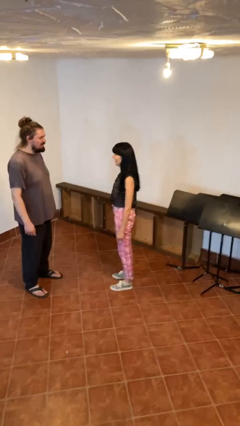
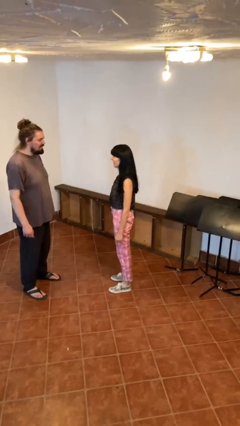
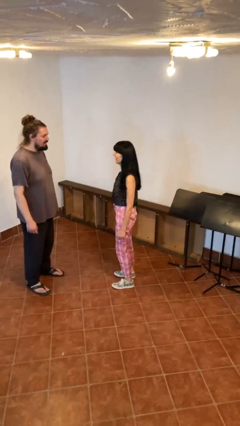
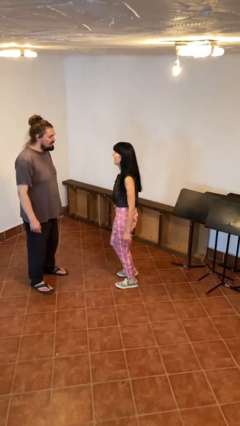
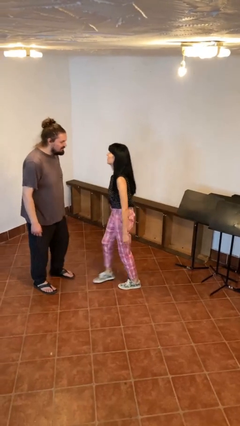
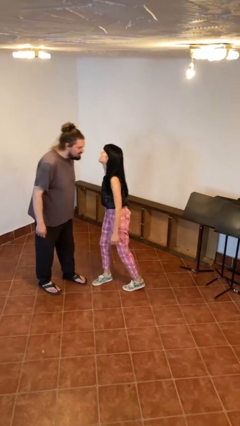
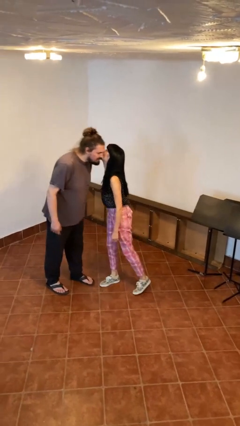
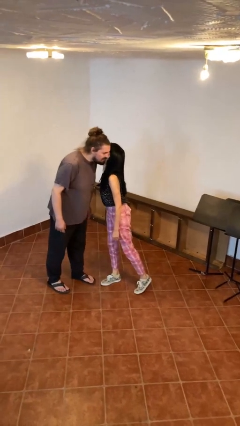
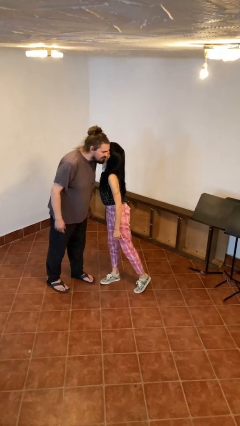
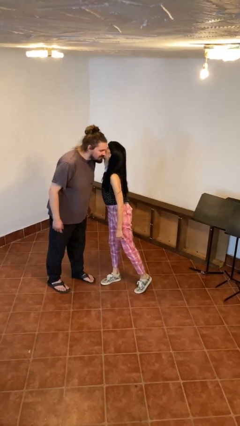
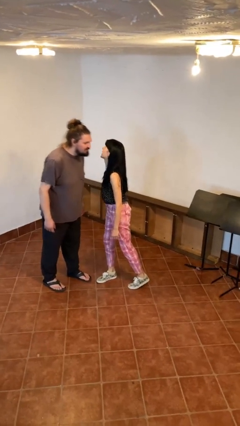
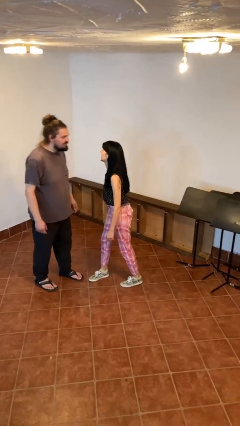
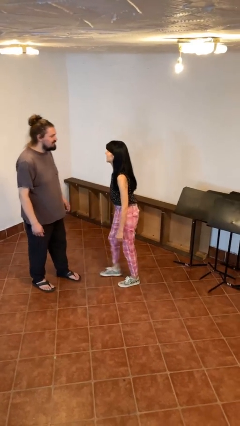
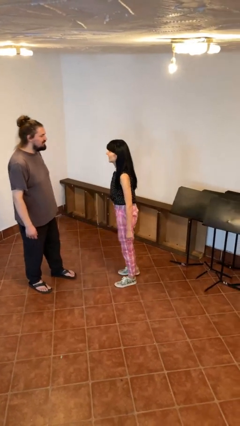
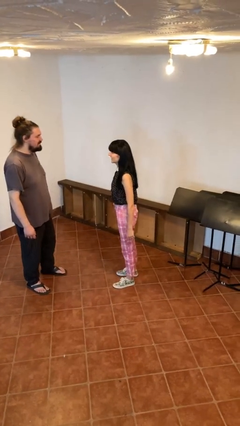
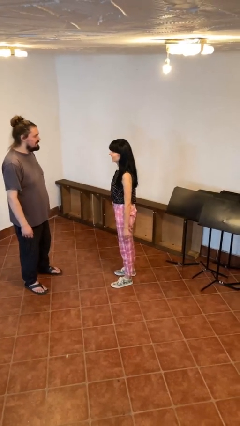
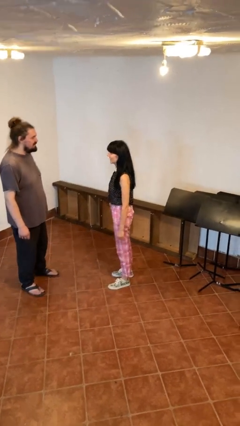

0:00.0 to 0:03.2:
person kisses cheek of person

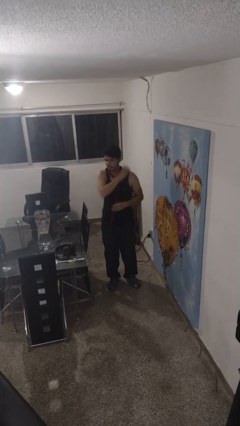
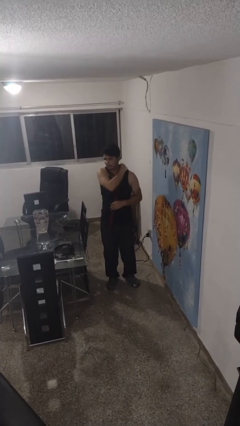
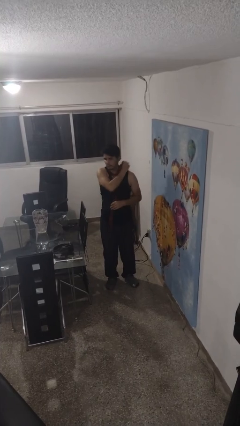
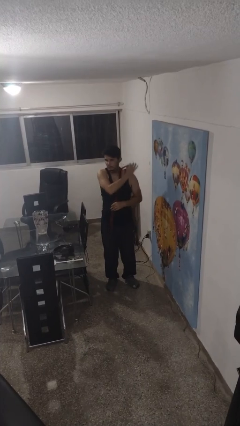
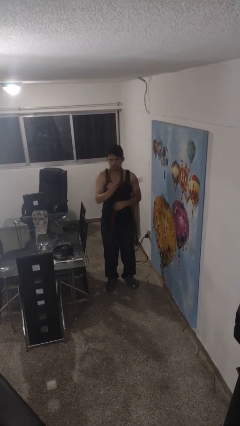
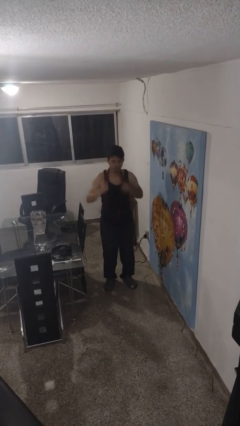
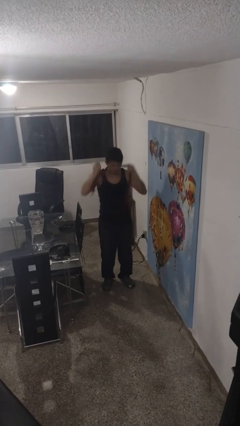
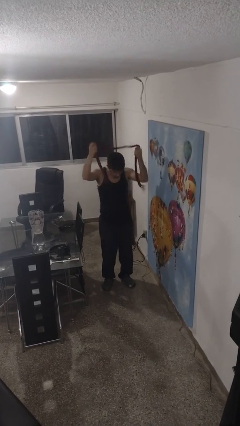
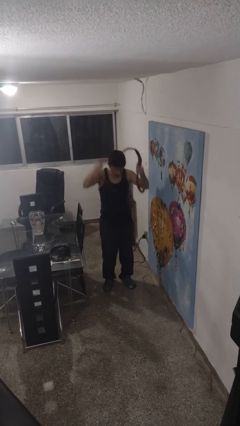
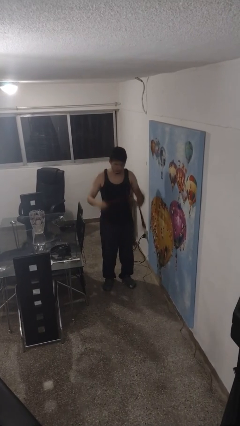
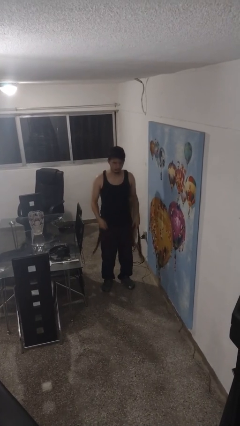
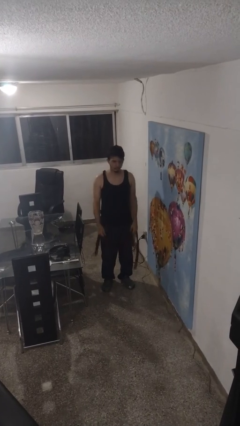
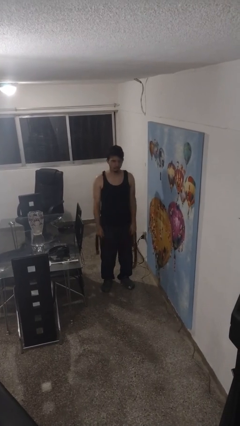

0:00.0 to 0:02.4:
person takes off scarf

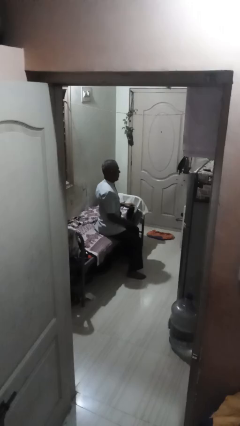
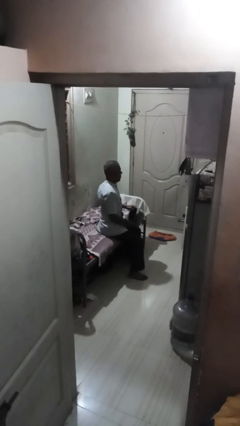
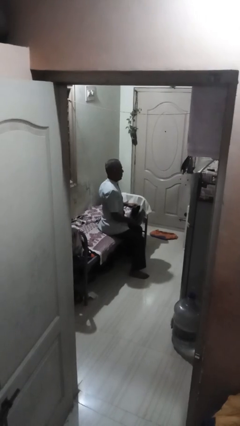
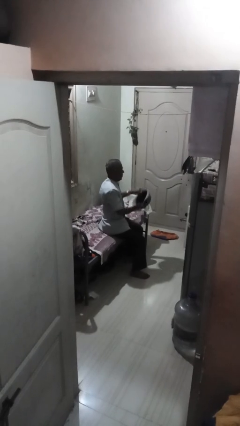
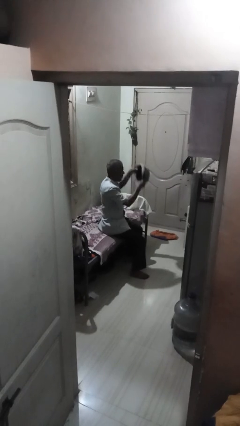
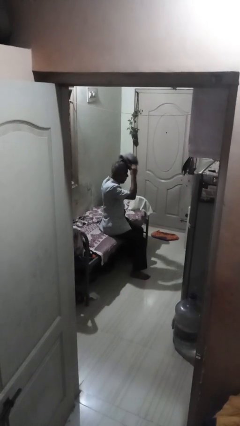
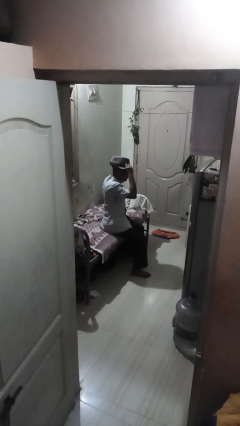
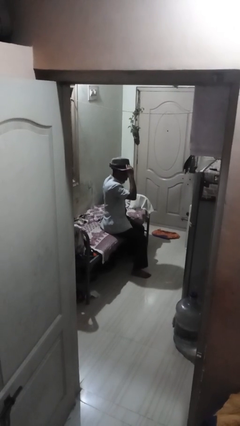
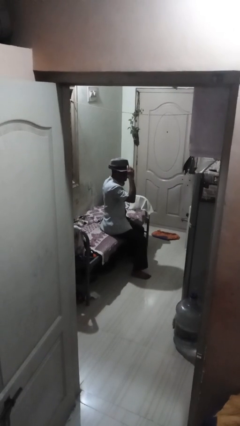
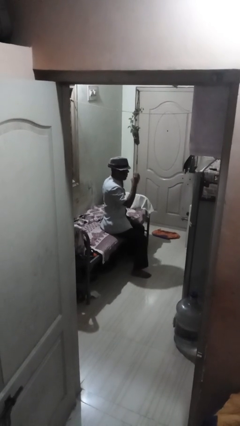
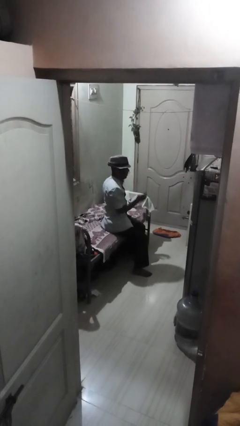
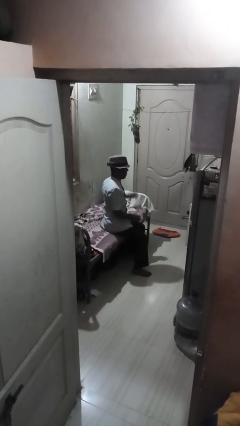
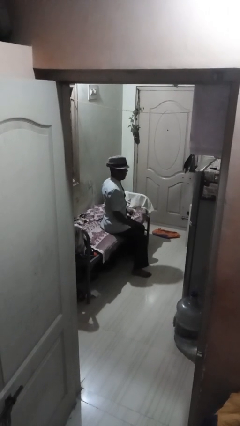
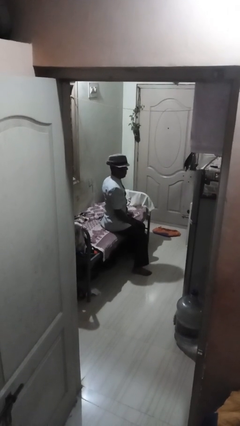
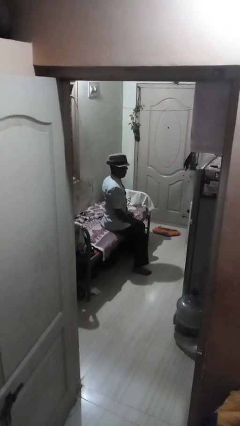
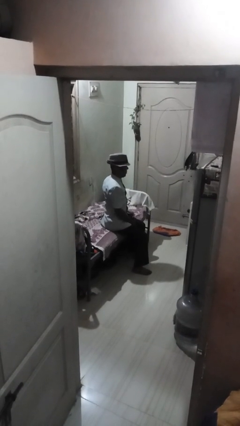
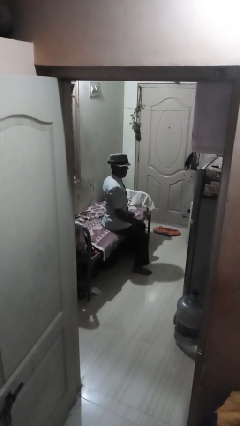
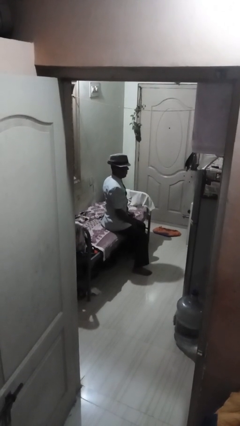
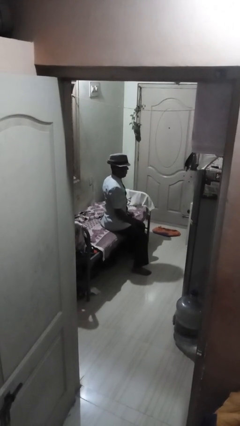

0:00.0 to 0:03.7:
person puts on hat

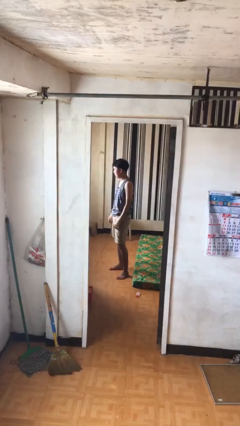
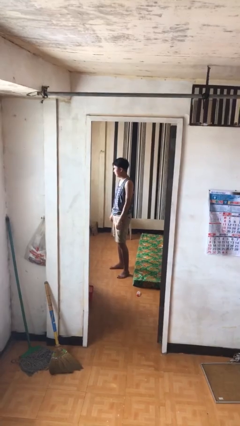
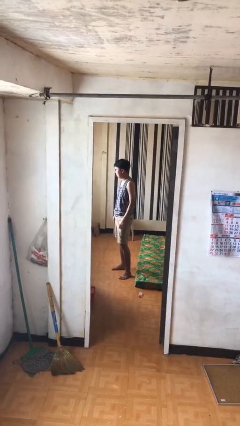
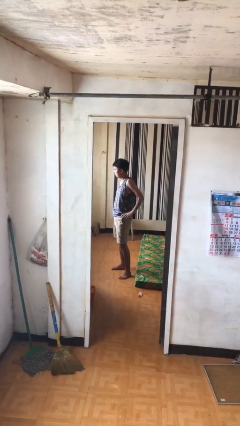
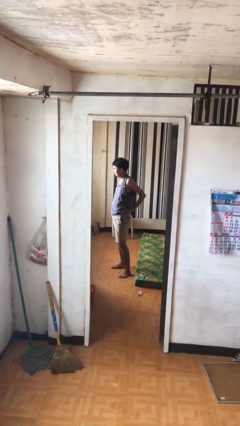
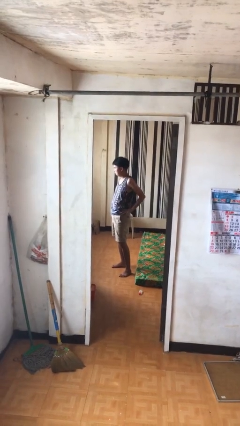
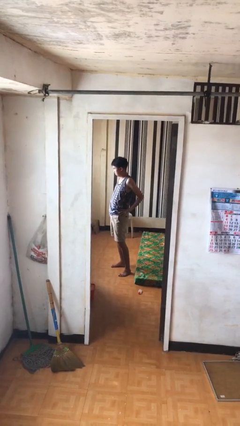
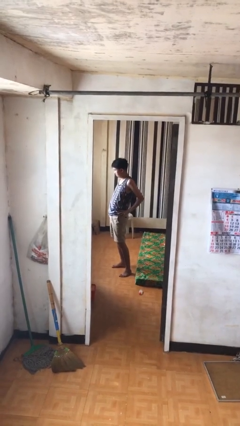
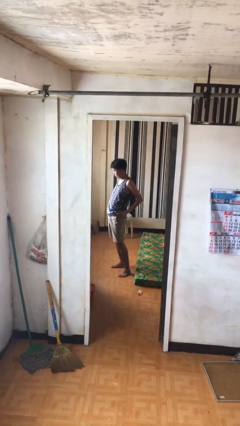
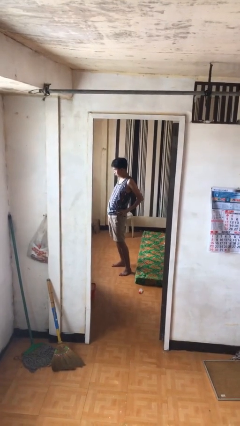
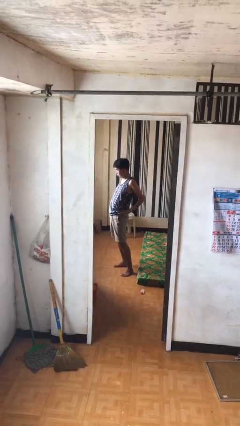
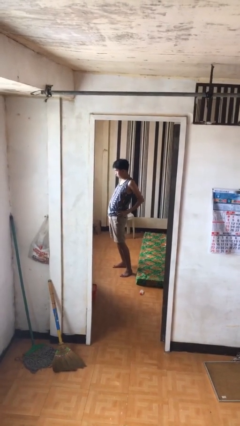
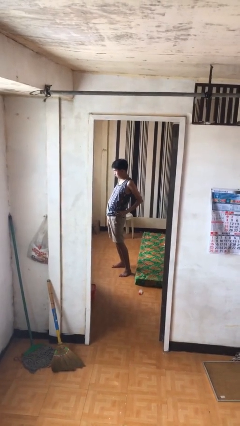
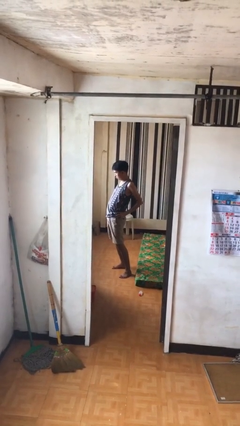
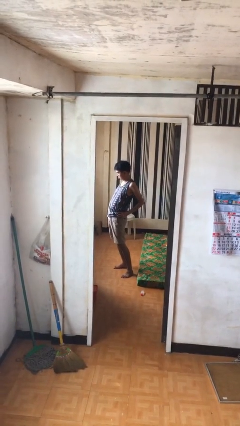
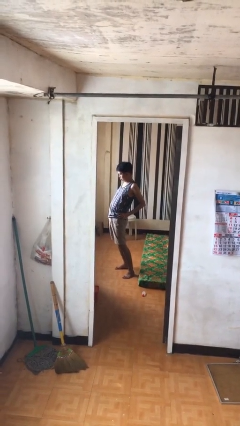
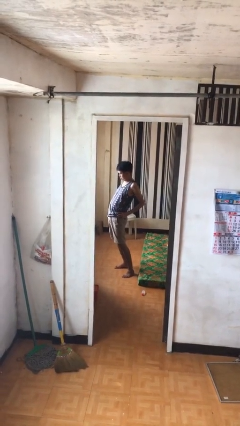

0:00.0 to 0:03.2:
person stretches back

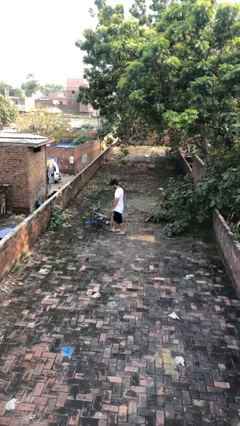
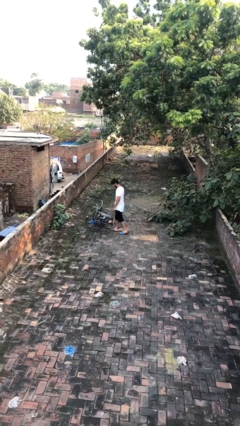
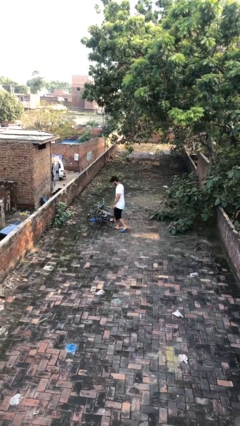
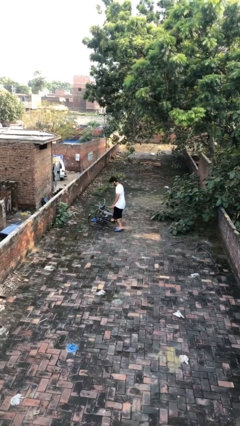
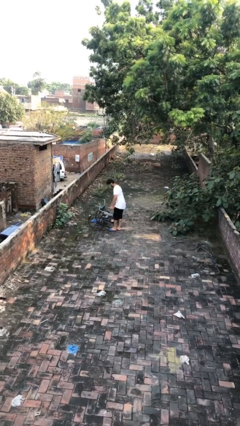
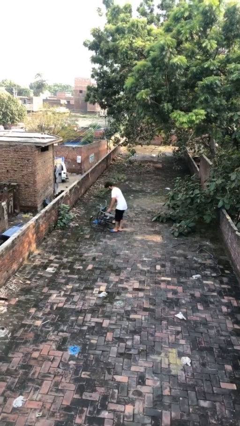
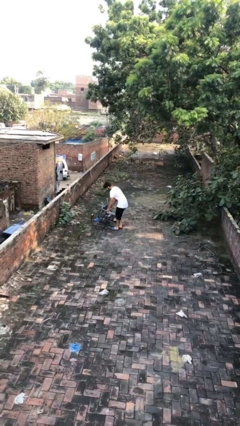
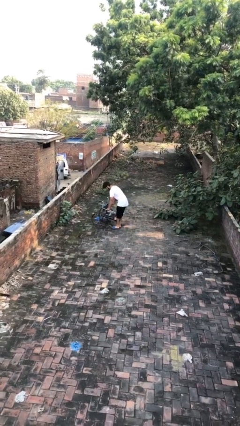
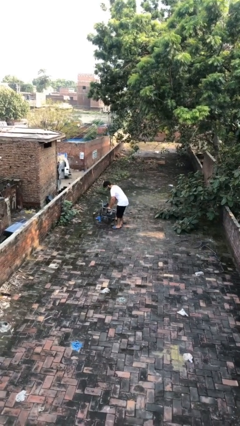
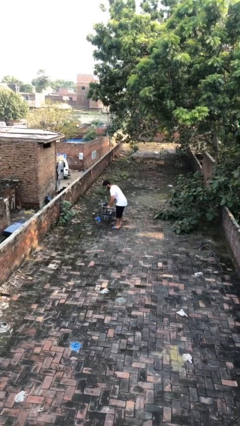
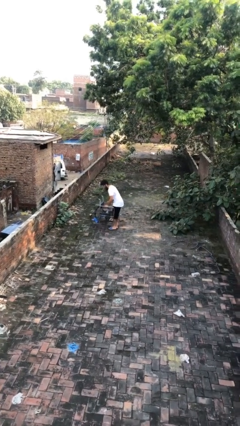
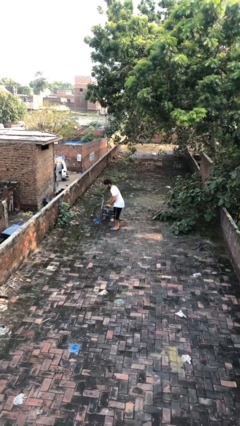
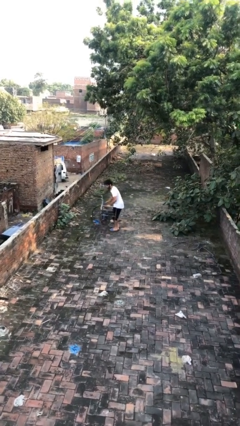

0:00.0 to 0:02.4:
person picks up object from floor

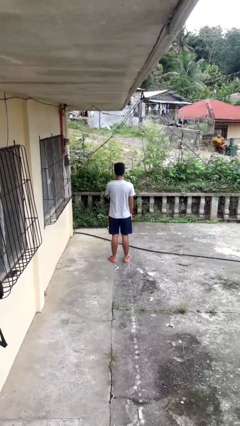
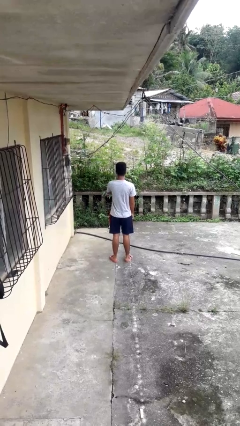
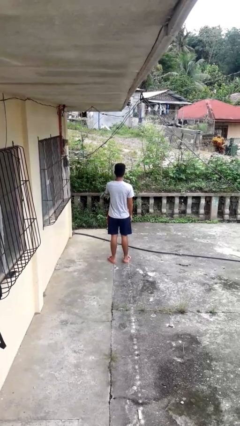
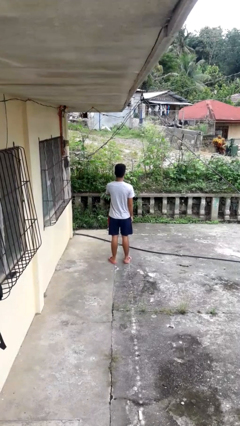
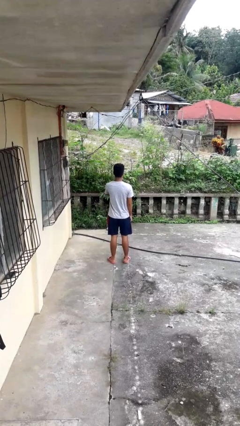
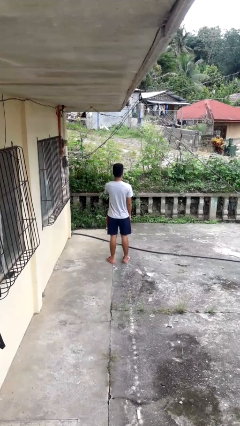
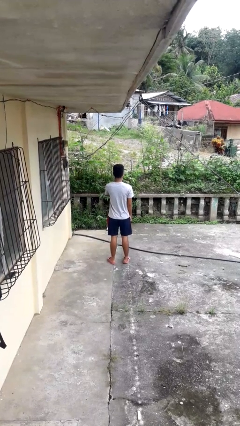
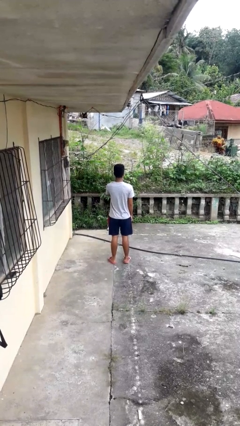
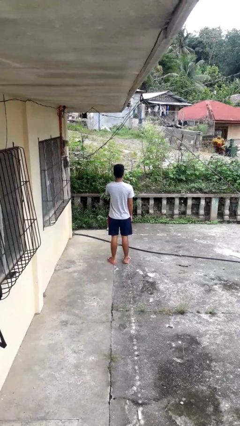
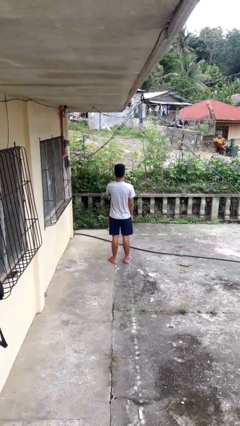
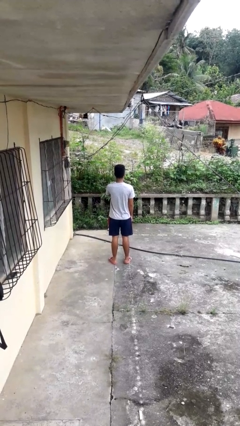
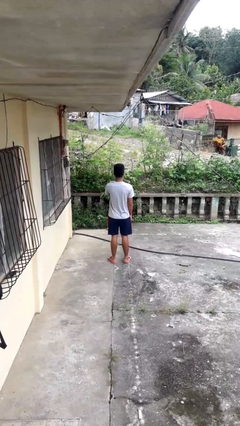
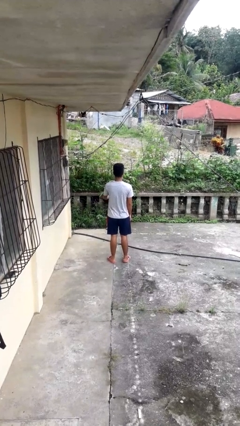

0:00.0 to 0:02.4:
person gestures thumbs up
